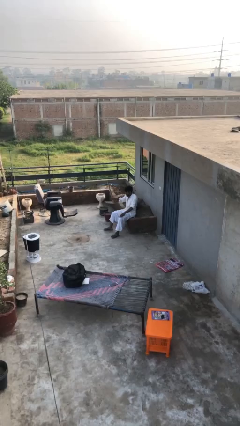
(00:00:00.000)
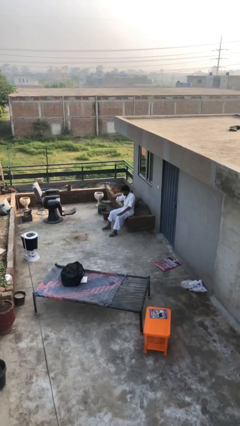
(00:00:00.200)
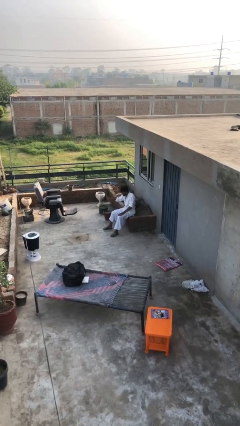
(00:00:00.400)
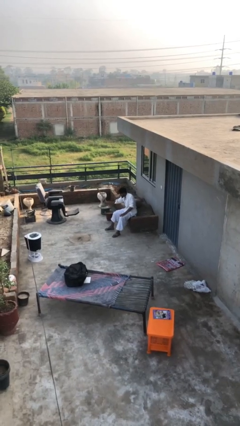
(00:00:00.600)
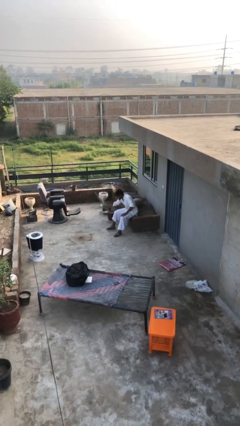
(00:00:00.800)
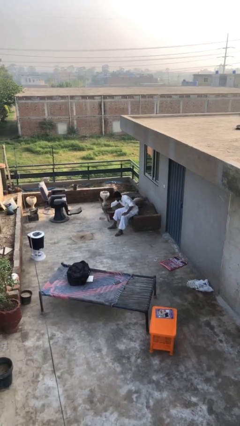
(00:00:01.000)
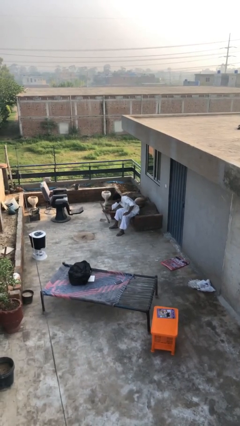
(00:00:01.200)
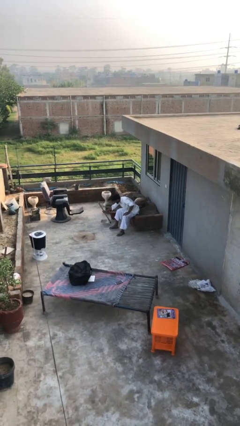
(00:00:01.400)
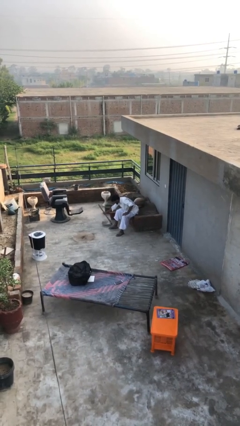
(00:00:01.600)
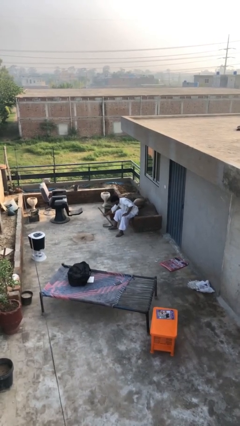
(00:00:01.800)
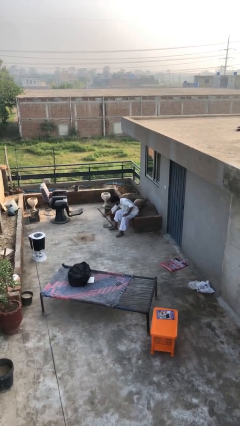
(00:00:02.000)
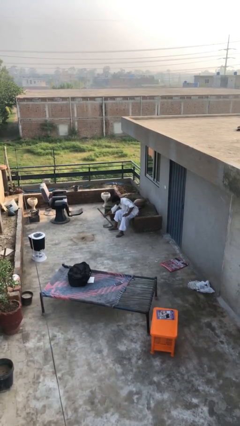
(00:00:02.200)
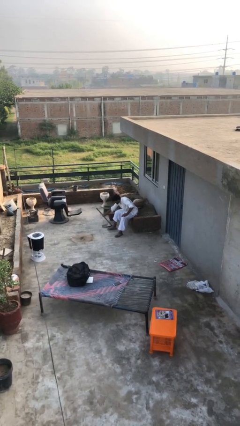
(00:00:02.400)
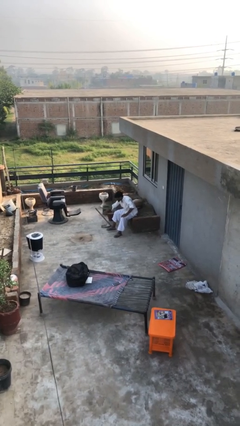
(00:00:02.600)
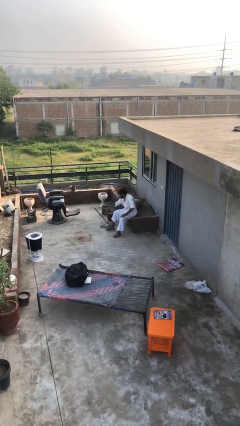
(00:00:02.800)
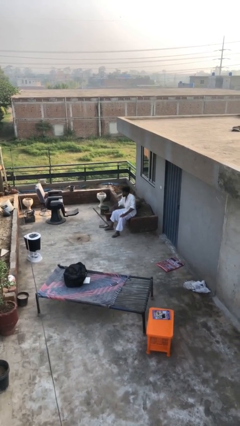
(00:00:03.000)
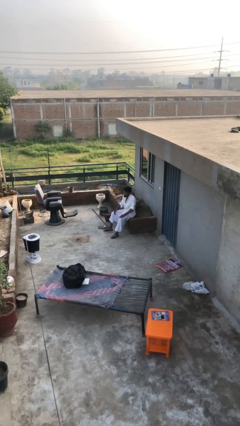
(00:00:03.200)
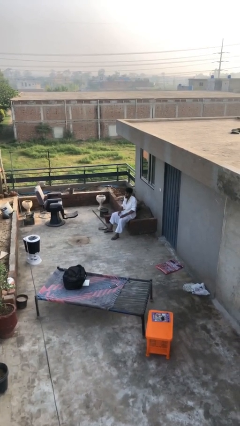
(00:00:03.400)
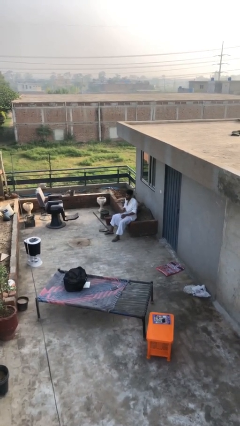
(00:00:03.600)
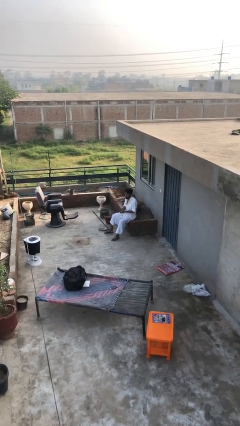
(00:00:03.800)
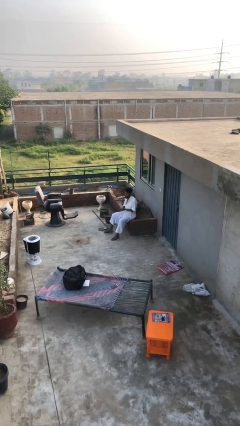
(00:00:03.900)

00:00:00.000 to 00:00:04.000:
person puts down object on floor

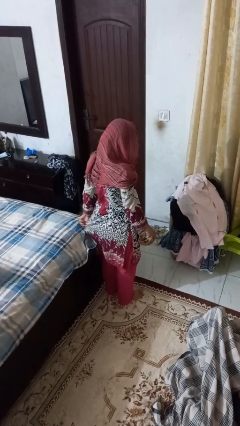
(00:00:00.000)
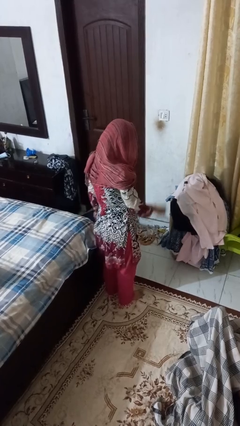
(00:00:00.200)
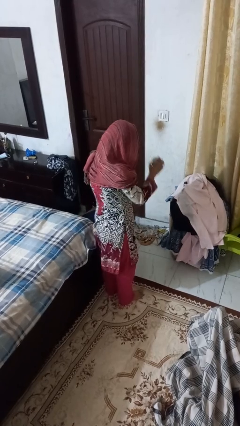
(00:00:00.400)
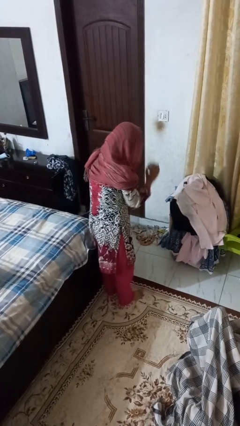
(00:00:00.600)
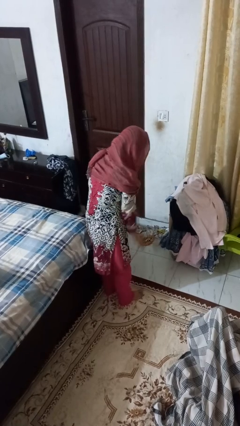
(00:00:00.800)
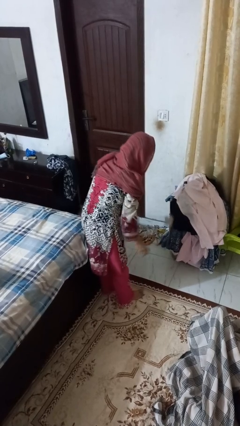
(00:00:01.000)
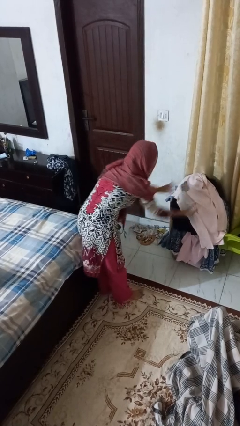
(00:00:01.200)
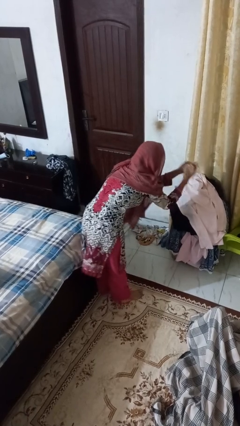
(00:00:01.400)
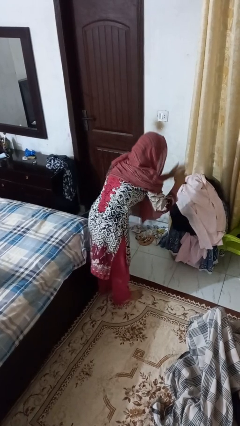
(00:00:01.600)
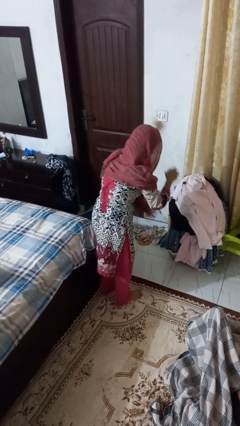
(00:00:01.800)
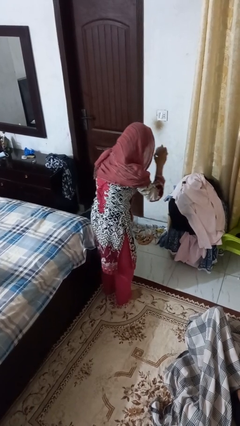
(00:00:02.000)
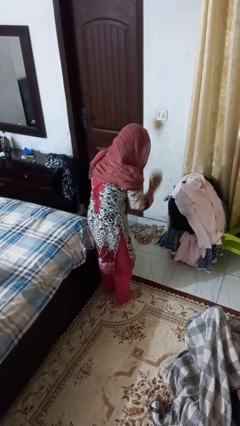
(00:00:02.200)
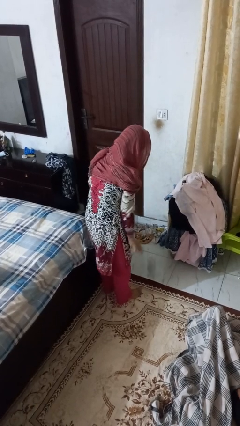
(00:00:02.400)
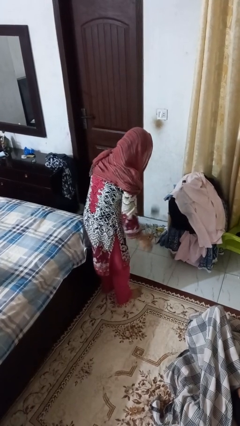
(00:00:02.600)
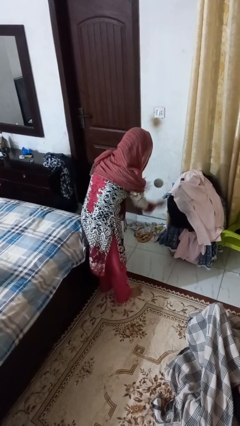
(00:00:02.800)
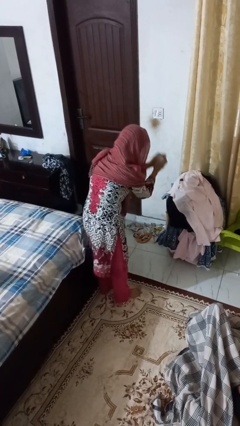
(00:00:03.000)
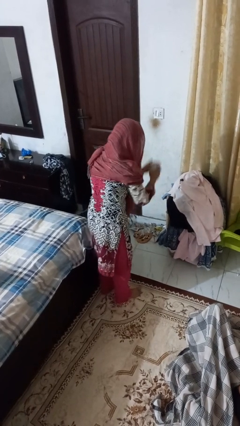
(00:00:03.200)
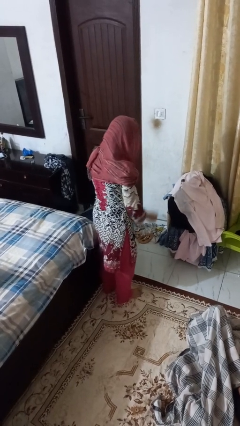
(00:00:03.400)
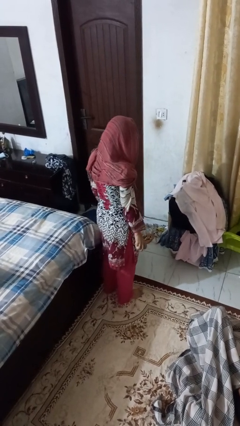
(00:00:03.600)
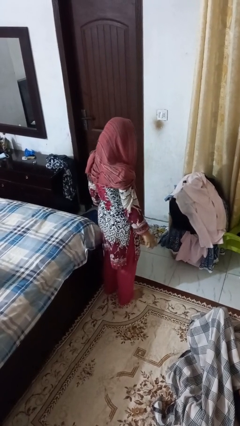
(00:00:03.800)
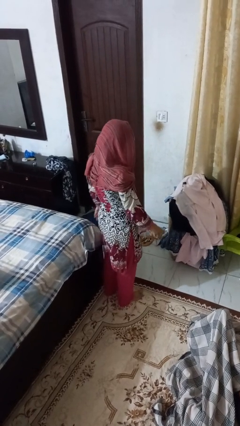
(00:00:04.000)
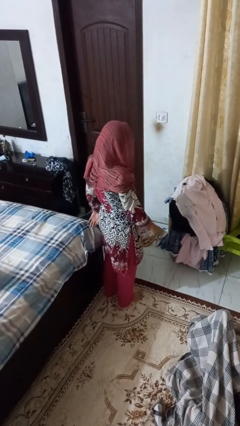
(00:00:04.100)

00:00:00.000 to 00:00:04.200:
person bounces ball on floor

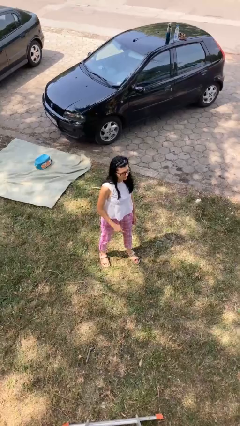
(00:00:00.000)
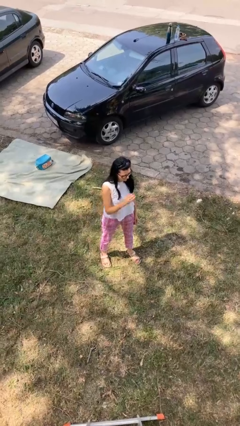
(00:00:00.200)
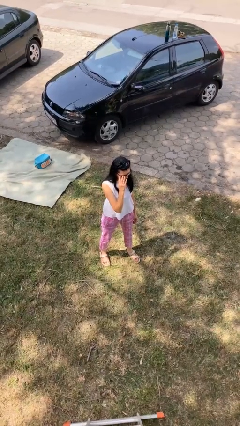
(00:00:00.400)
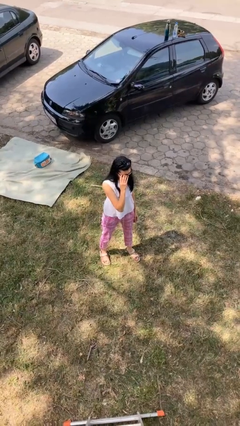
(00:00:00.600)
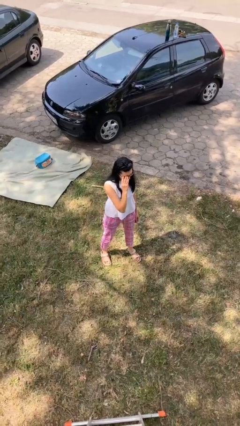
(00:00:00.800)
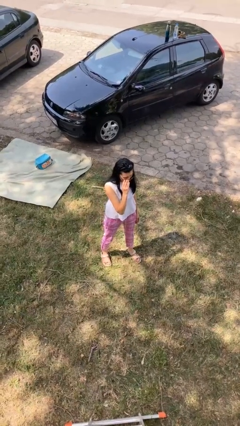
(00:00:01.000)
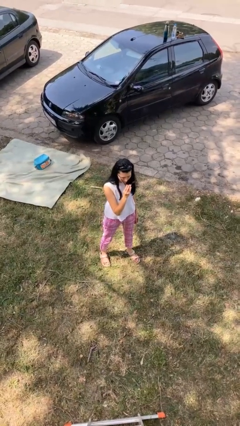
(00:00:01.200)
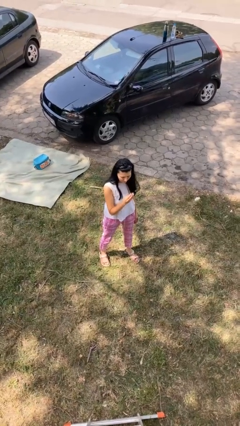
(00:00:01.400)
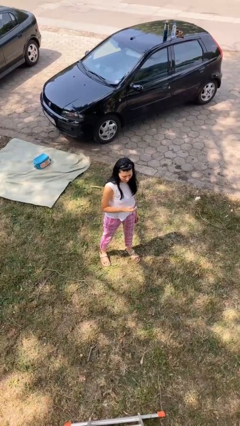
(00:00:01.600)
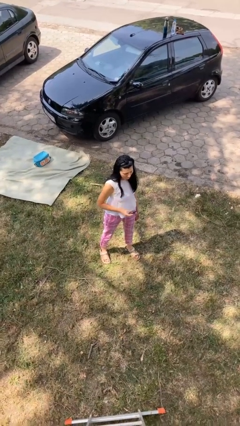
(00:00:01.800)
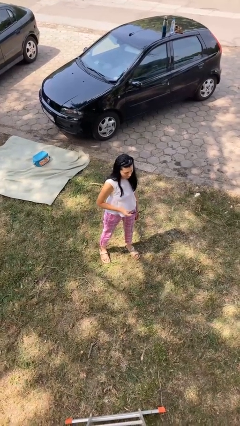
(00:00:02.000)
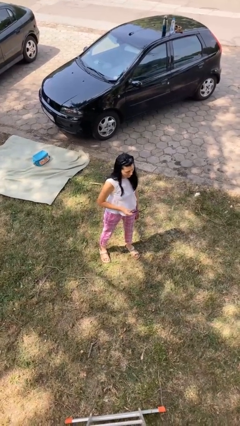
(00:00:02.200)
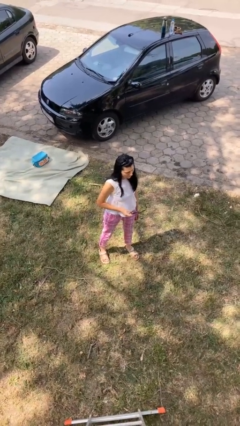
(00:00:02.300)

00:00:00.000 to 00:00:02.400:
person takes off glasses

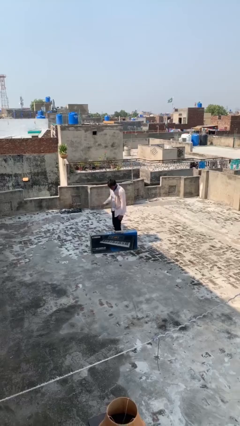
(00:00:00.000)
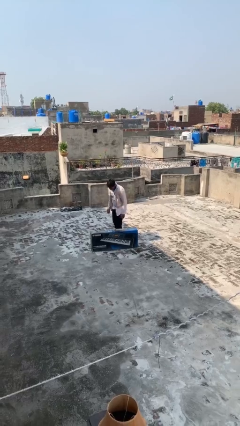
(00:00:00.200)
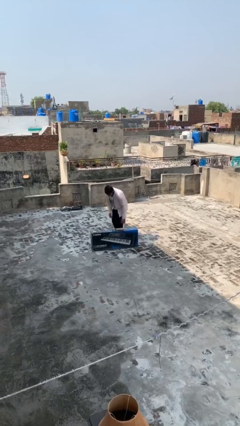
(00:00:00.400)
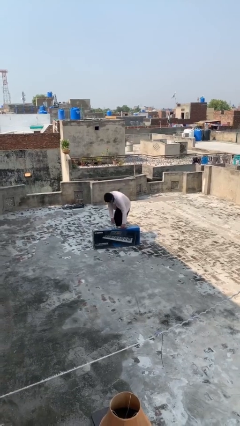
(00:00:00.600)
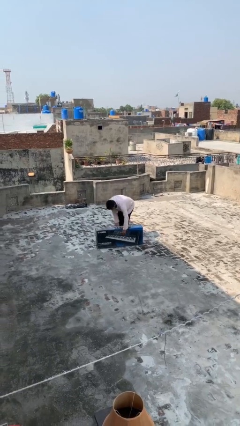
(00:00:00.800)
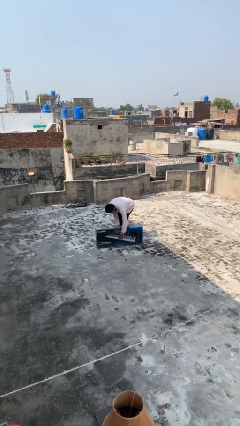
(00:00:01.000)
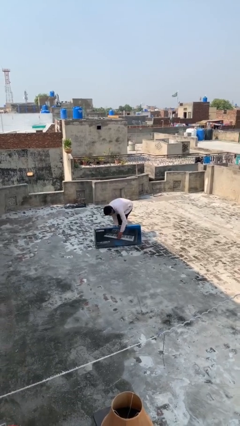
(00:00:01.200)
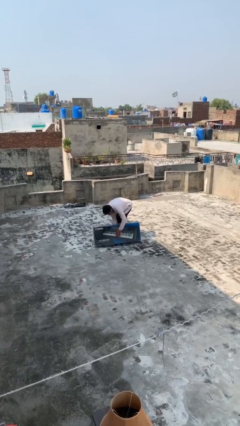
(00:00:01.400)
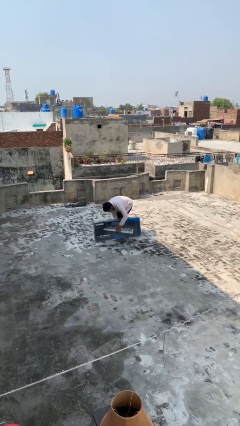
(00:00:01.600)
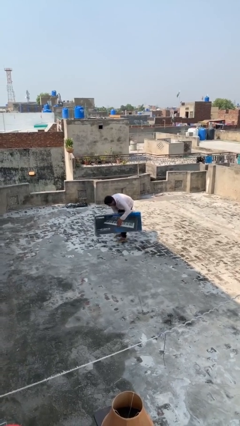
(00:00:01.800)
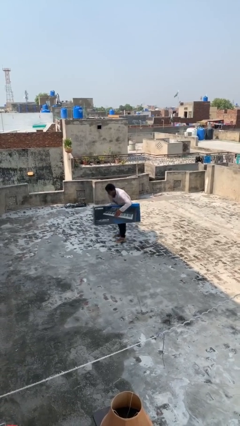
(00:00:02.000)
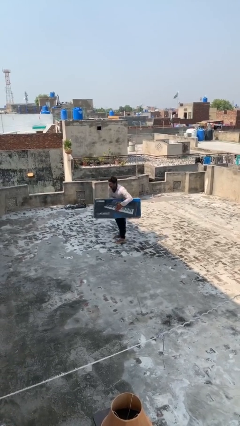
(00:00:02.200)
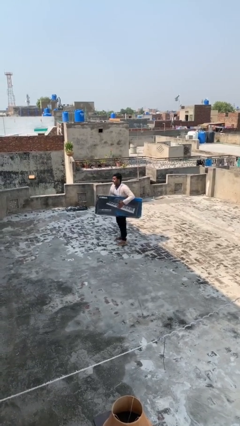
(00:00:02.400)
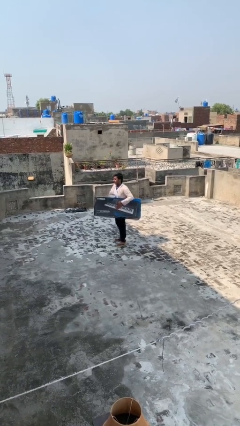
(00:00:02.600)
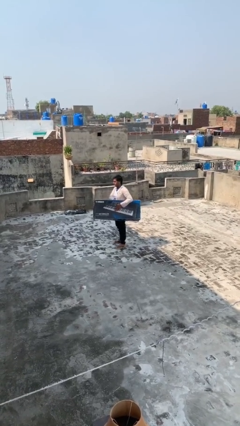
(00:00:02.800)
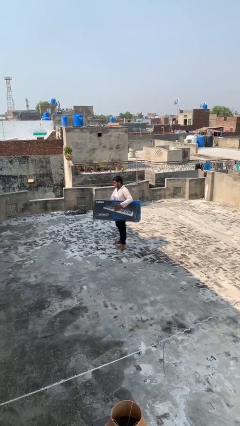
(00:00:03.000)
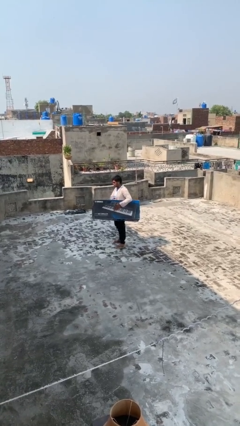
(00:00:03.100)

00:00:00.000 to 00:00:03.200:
person picks up object from floor

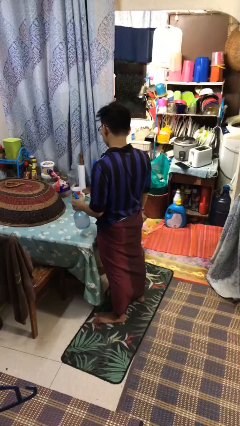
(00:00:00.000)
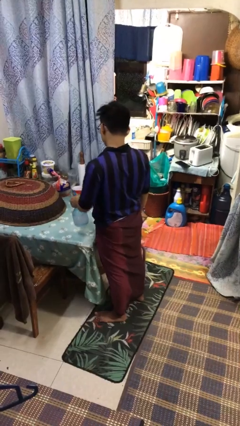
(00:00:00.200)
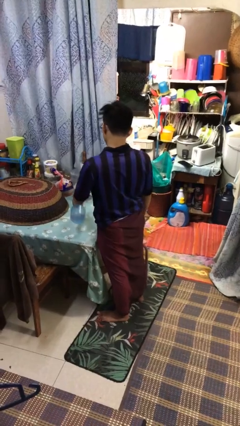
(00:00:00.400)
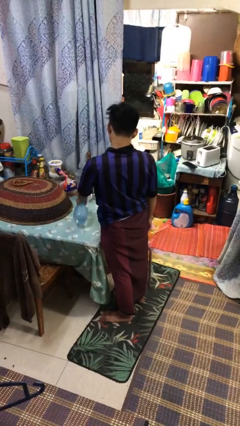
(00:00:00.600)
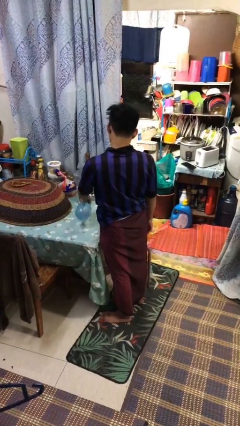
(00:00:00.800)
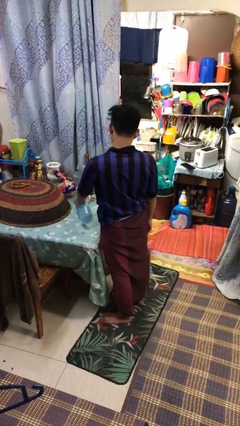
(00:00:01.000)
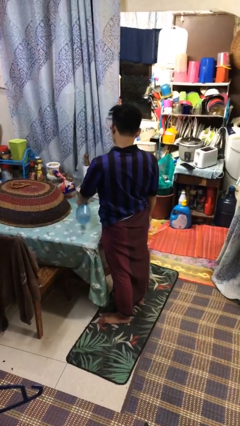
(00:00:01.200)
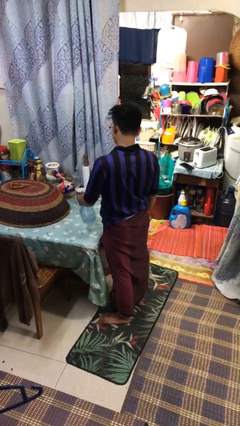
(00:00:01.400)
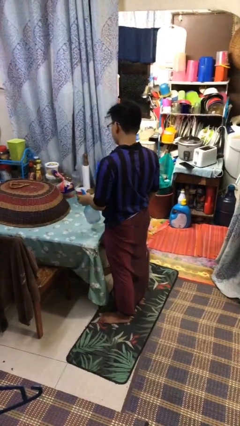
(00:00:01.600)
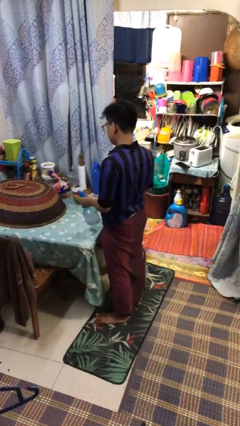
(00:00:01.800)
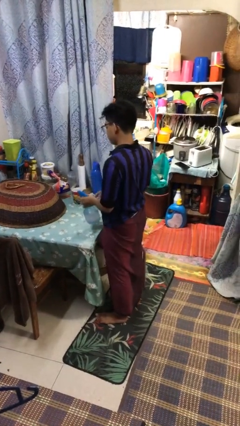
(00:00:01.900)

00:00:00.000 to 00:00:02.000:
person sprays from bottle

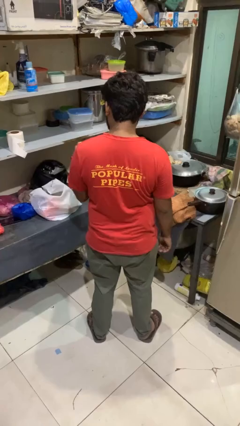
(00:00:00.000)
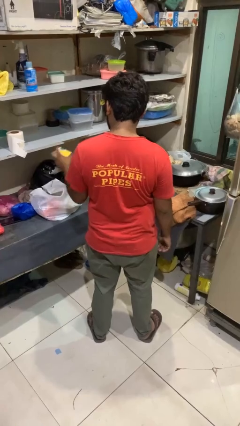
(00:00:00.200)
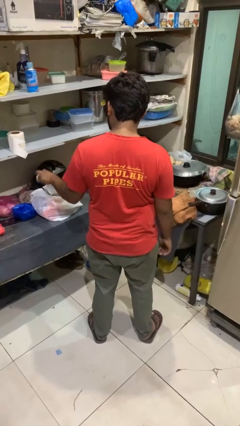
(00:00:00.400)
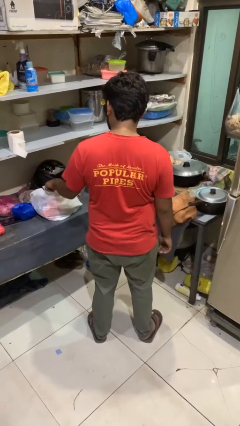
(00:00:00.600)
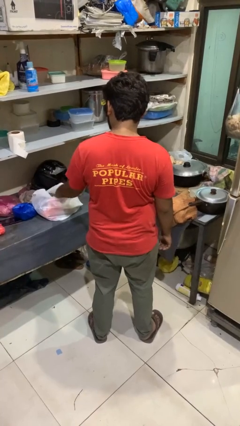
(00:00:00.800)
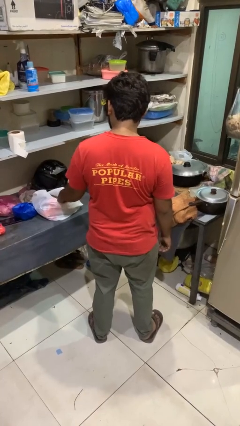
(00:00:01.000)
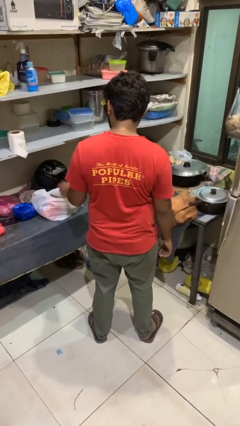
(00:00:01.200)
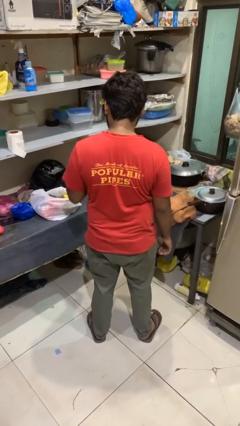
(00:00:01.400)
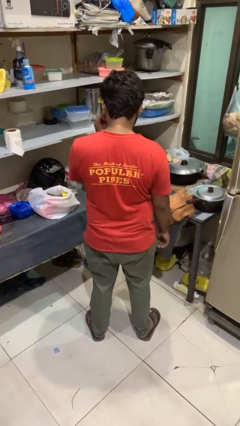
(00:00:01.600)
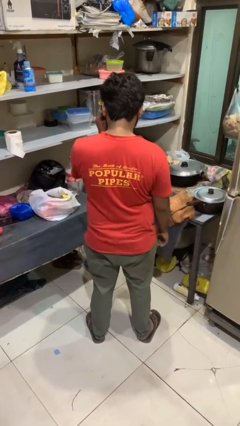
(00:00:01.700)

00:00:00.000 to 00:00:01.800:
person puts object into bag
